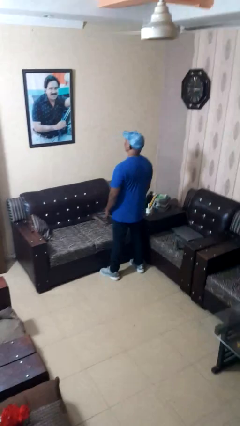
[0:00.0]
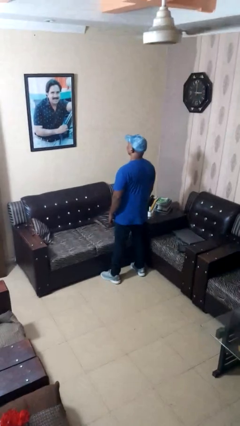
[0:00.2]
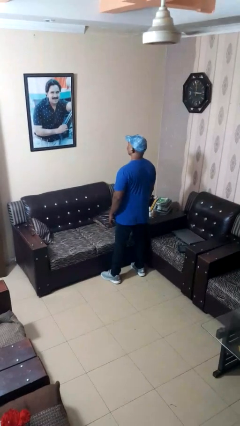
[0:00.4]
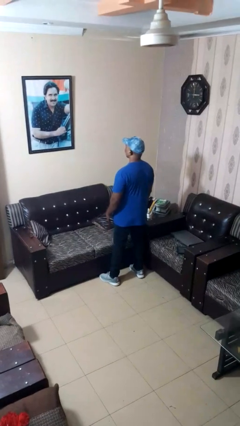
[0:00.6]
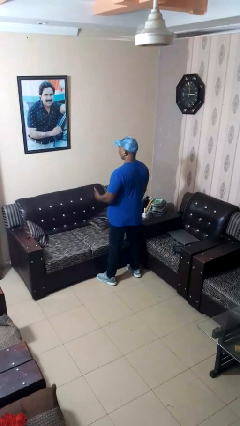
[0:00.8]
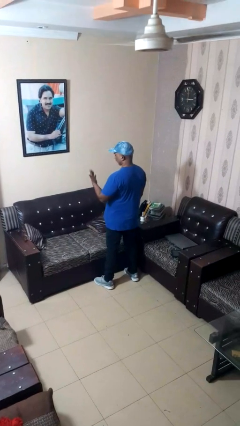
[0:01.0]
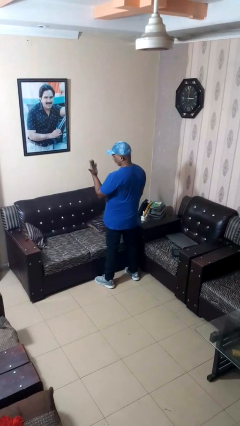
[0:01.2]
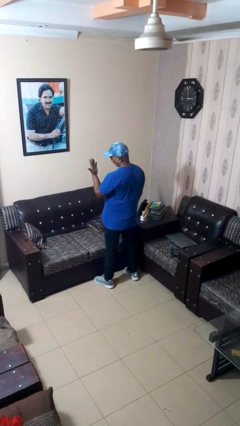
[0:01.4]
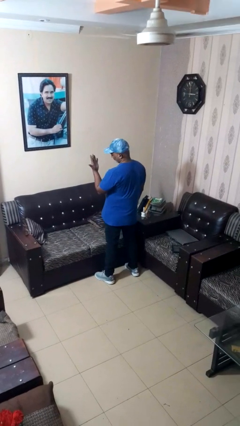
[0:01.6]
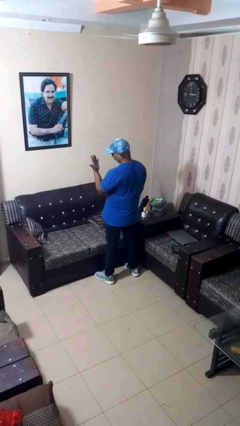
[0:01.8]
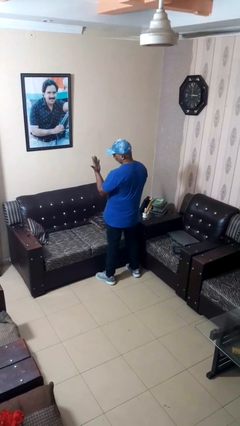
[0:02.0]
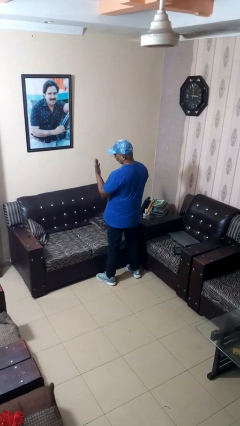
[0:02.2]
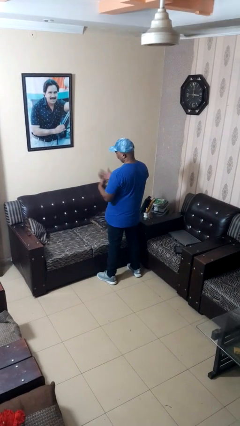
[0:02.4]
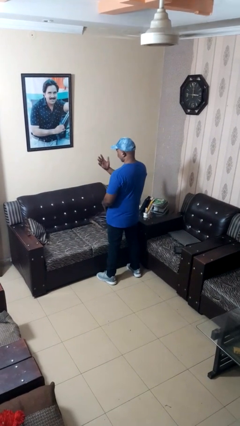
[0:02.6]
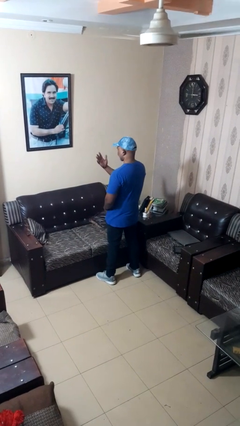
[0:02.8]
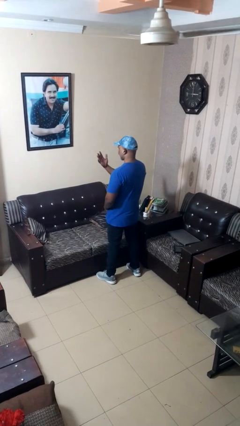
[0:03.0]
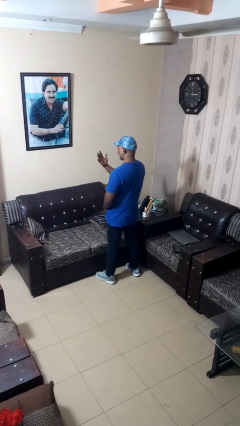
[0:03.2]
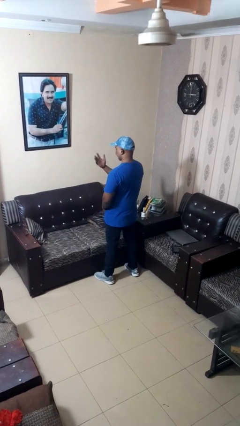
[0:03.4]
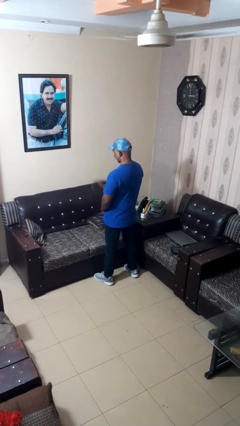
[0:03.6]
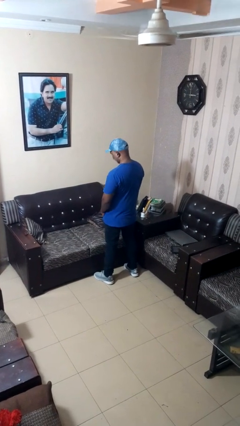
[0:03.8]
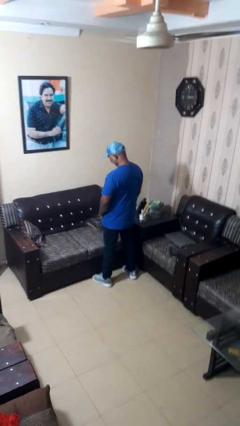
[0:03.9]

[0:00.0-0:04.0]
person looks at hands in lap

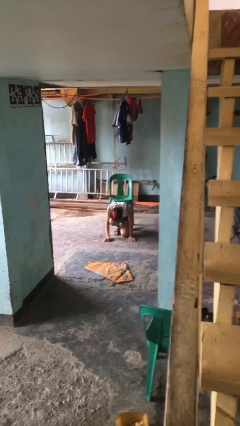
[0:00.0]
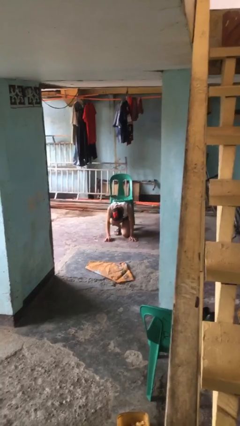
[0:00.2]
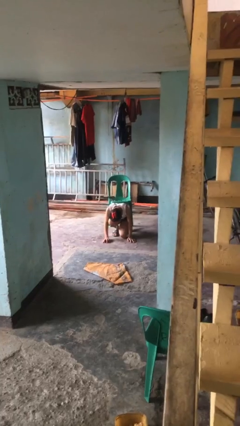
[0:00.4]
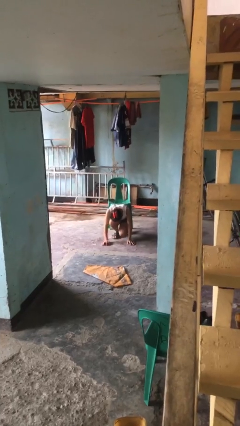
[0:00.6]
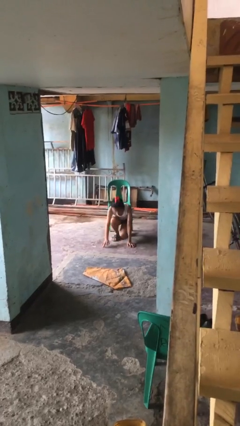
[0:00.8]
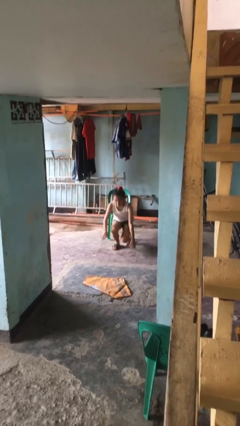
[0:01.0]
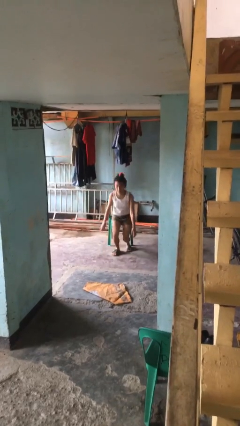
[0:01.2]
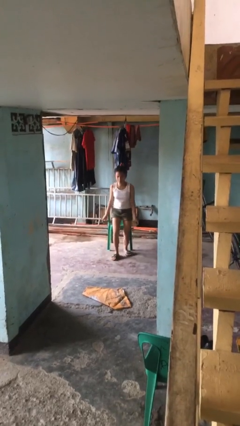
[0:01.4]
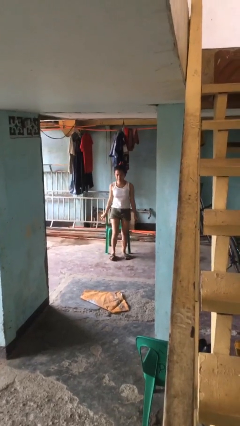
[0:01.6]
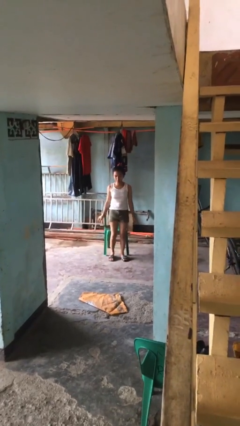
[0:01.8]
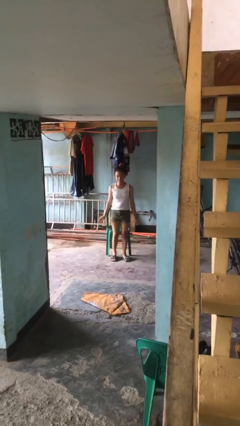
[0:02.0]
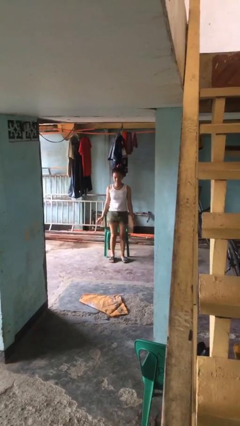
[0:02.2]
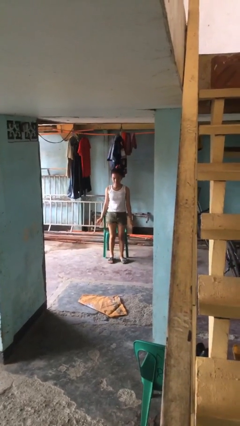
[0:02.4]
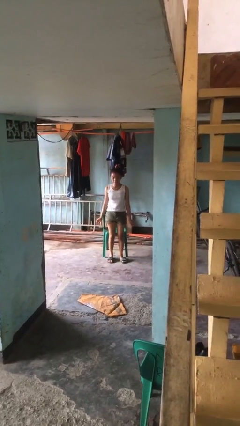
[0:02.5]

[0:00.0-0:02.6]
person stands up from floor

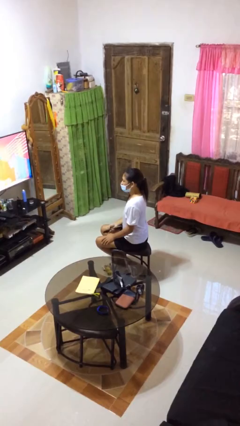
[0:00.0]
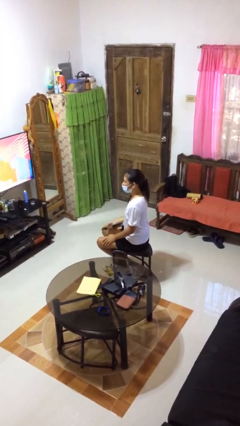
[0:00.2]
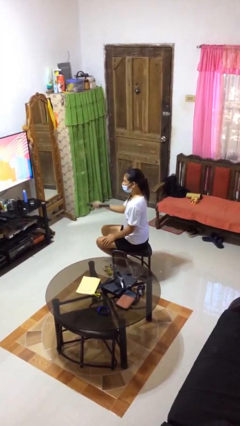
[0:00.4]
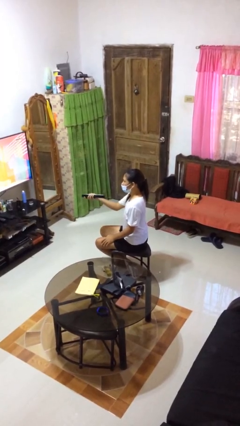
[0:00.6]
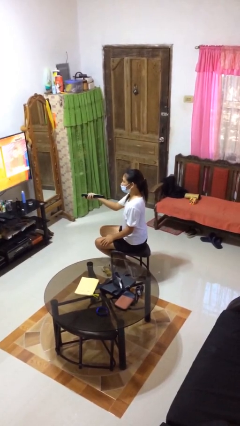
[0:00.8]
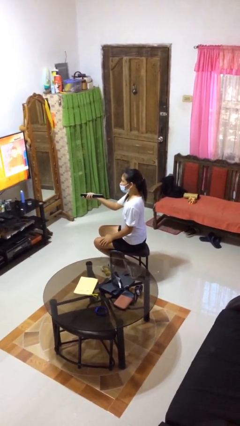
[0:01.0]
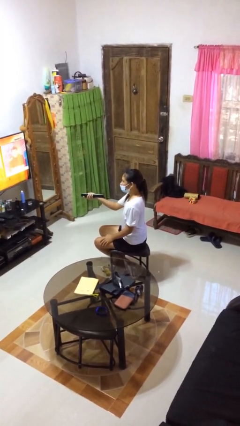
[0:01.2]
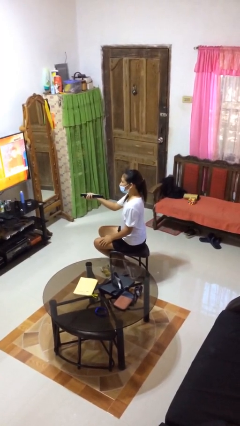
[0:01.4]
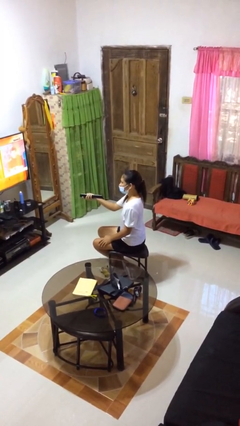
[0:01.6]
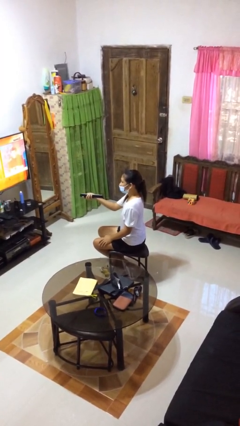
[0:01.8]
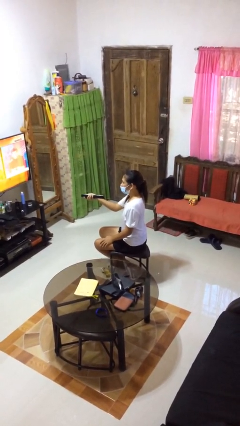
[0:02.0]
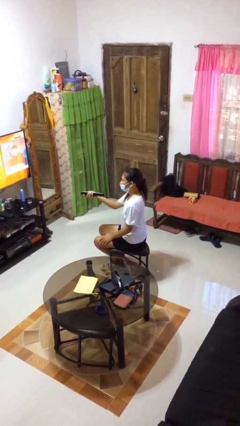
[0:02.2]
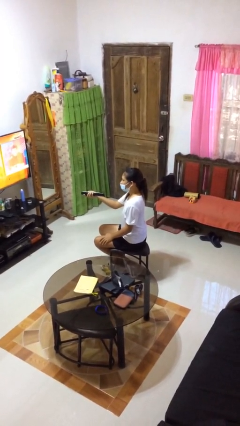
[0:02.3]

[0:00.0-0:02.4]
person uses television remote

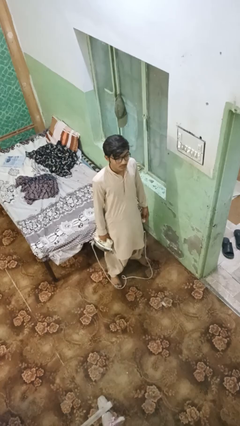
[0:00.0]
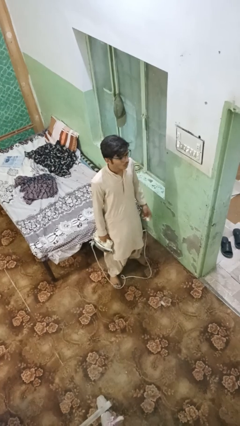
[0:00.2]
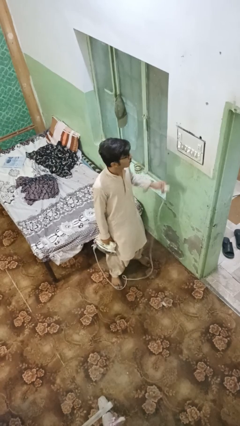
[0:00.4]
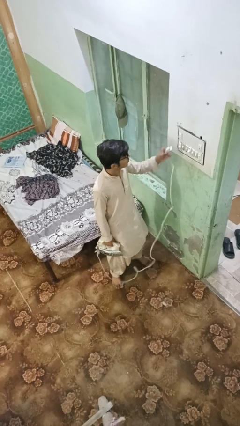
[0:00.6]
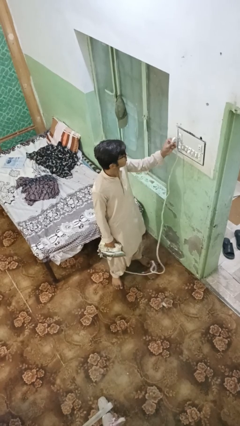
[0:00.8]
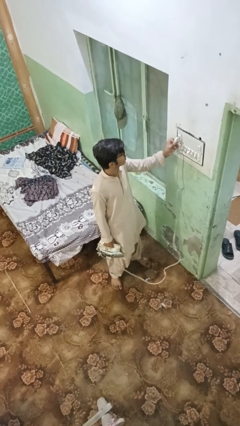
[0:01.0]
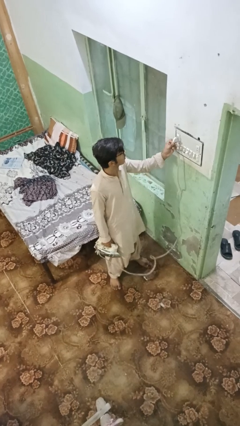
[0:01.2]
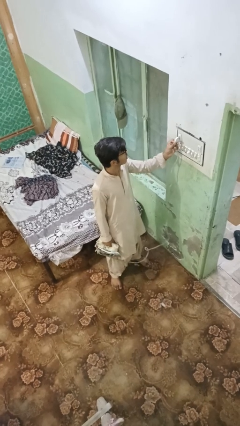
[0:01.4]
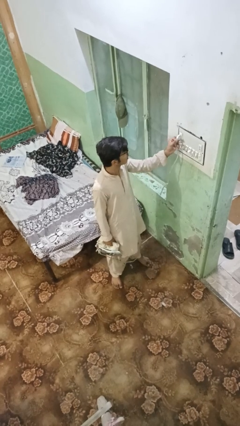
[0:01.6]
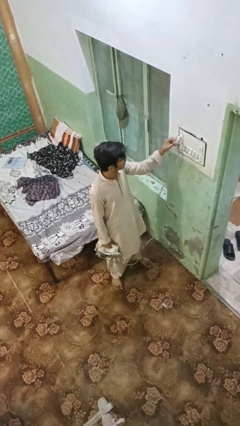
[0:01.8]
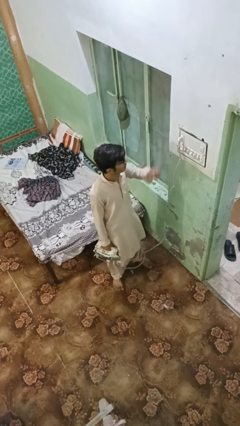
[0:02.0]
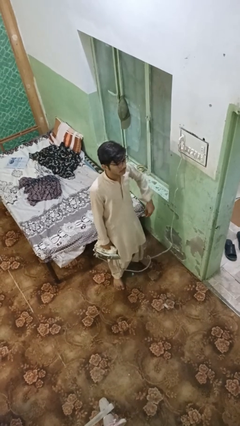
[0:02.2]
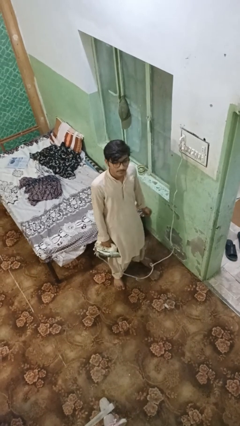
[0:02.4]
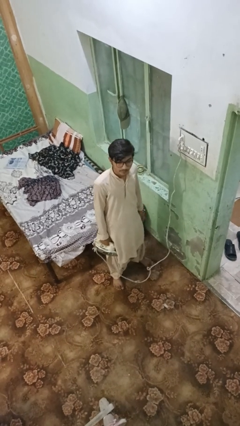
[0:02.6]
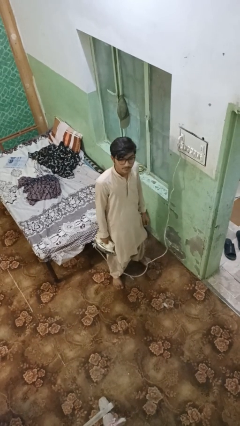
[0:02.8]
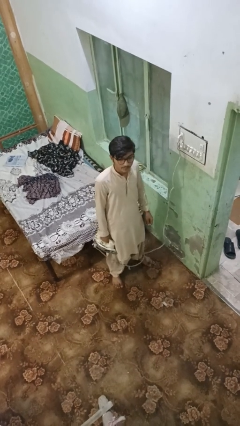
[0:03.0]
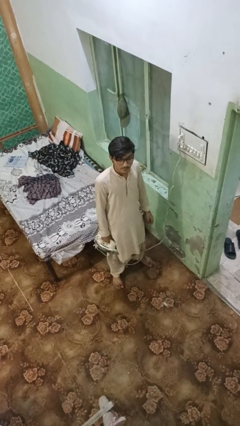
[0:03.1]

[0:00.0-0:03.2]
person plugs into electrical socket

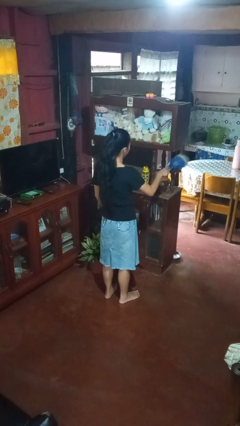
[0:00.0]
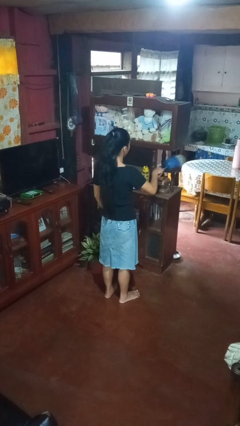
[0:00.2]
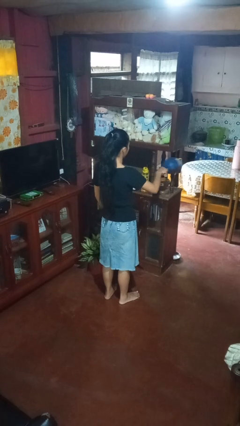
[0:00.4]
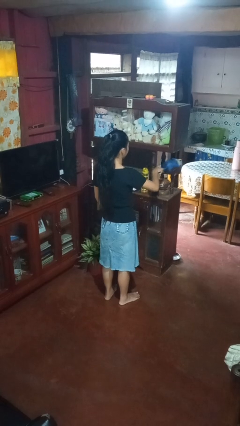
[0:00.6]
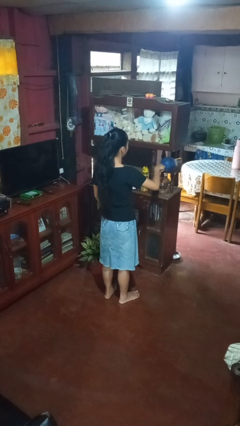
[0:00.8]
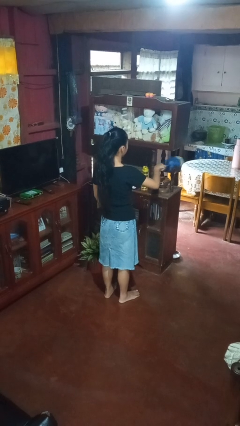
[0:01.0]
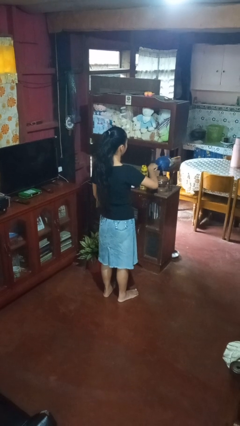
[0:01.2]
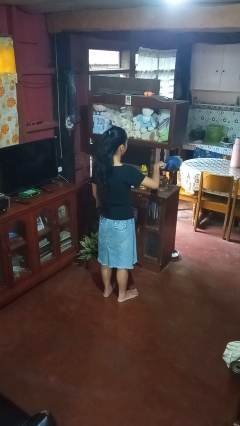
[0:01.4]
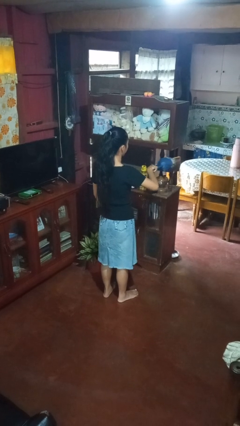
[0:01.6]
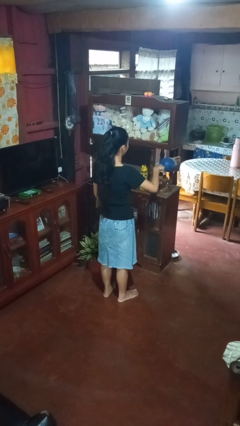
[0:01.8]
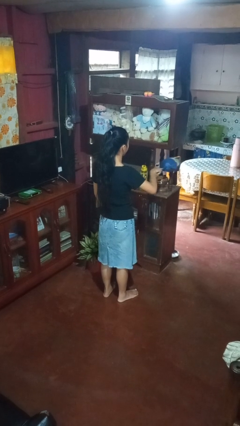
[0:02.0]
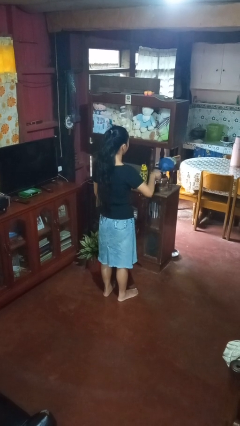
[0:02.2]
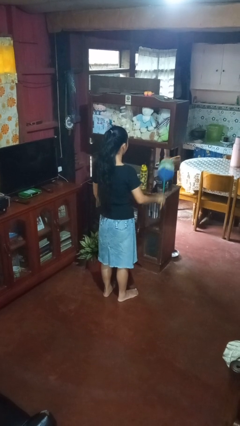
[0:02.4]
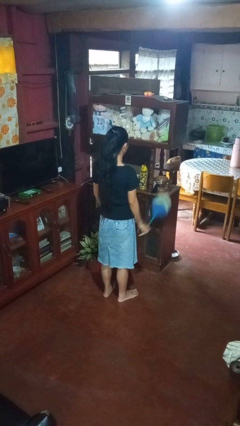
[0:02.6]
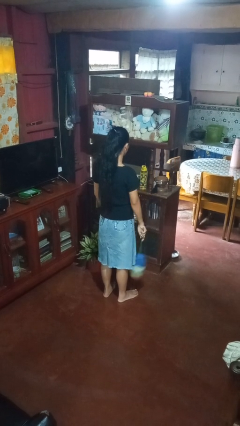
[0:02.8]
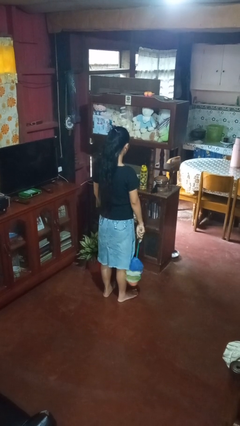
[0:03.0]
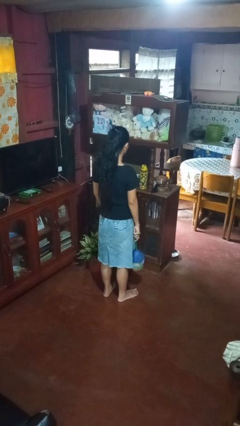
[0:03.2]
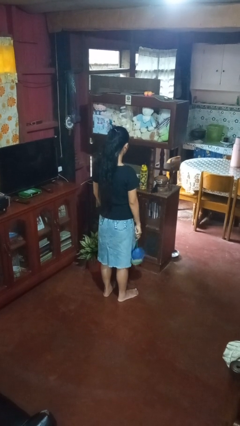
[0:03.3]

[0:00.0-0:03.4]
person dusts furniture

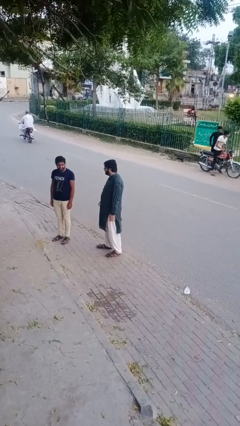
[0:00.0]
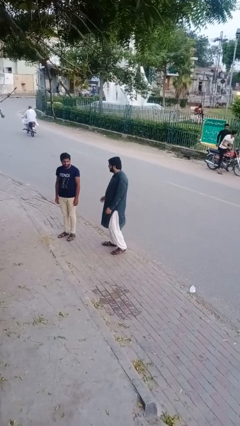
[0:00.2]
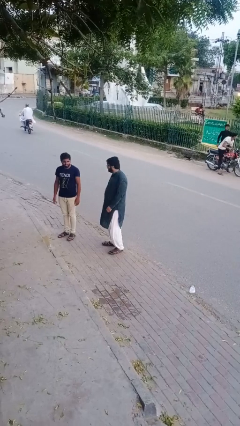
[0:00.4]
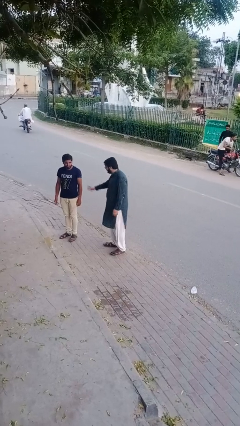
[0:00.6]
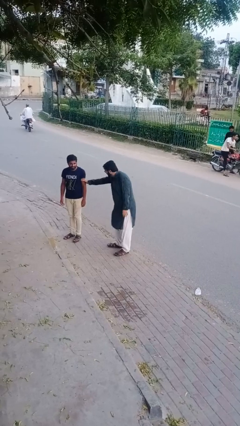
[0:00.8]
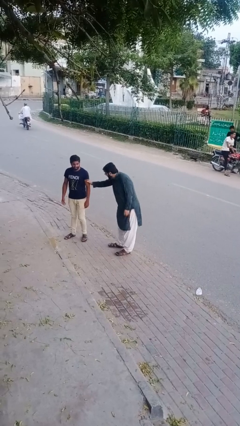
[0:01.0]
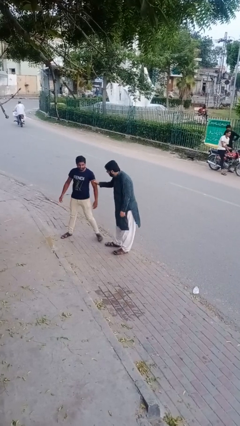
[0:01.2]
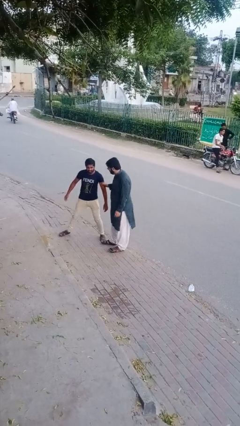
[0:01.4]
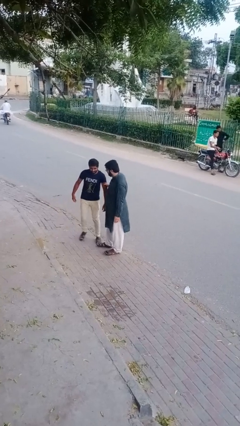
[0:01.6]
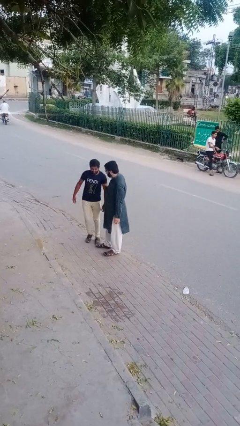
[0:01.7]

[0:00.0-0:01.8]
person grabs person by bicep
